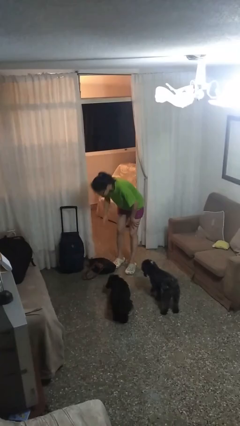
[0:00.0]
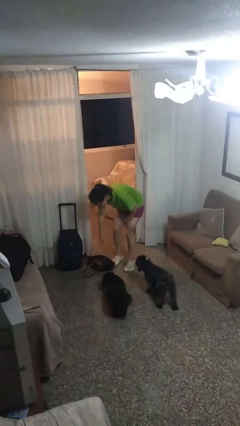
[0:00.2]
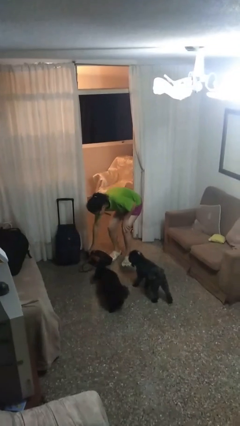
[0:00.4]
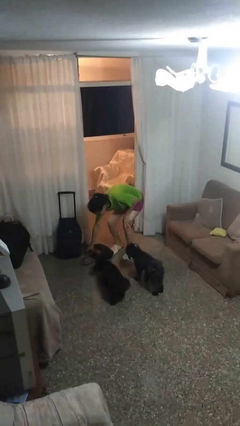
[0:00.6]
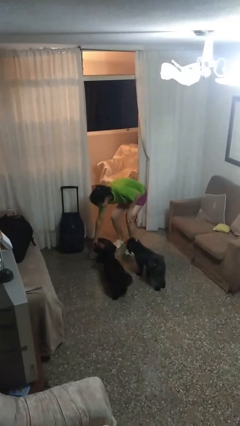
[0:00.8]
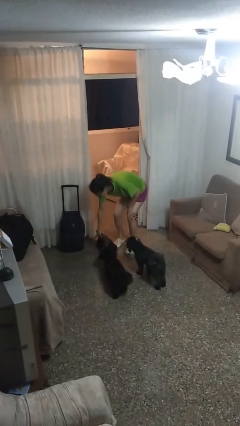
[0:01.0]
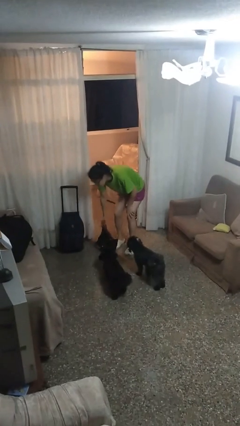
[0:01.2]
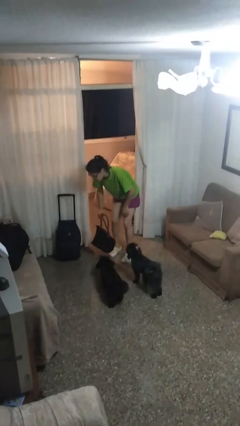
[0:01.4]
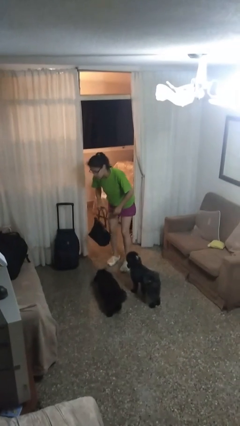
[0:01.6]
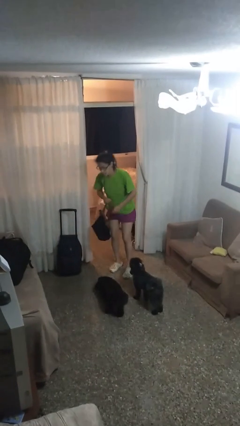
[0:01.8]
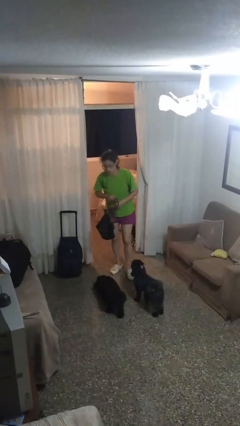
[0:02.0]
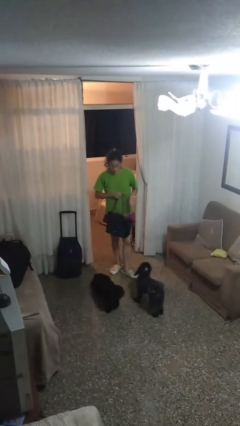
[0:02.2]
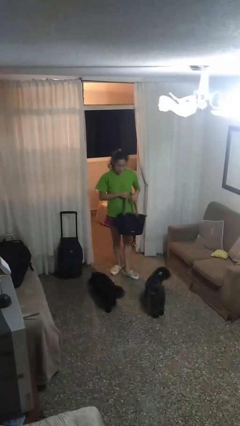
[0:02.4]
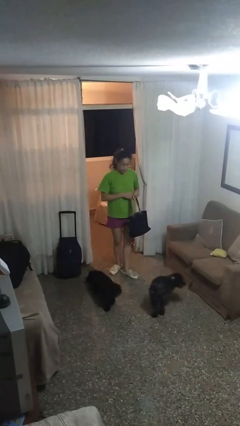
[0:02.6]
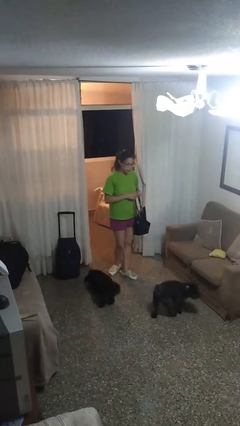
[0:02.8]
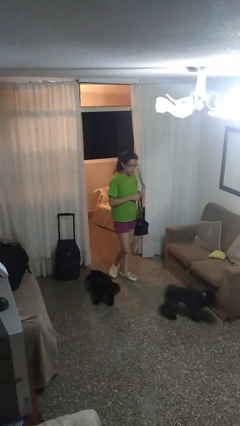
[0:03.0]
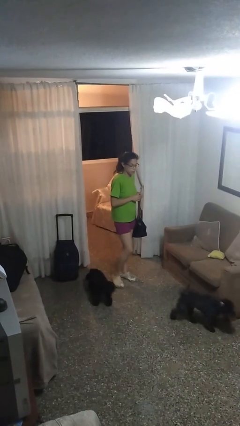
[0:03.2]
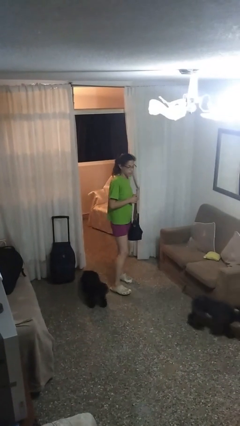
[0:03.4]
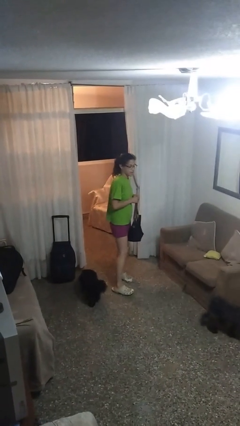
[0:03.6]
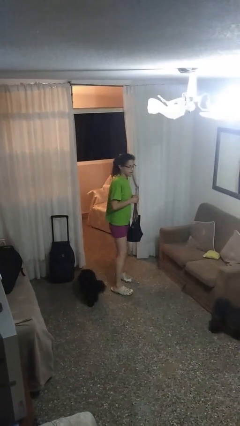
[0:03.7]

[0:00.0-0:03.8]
person picks up object from floor

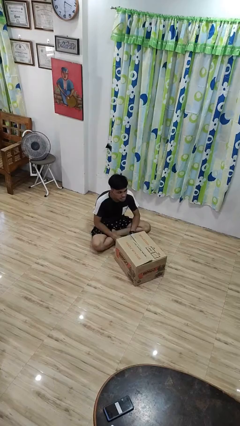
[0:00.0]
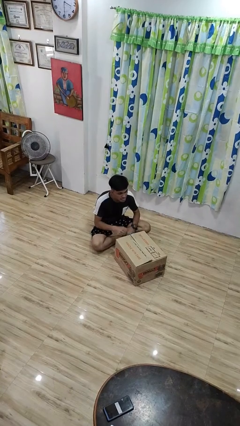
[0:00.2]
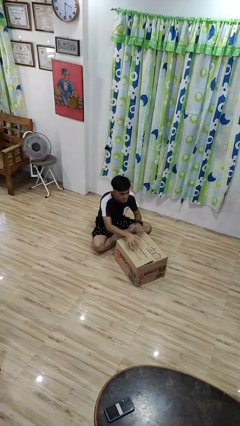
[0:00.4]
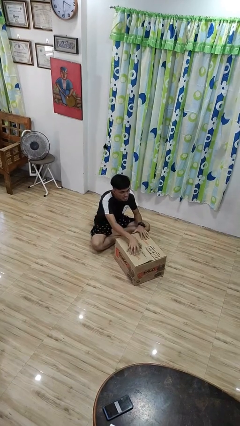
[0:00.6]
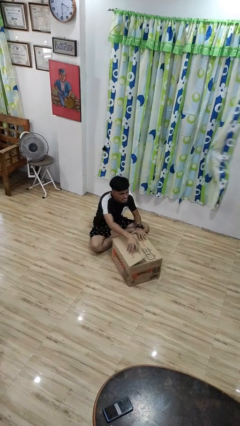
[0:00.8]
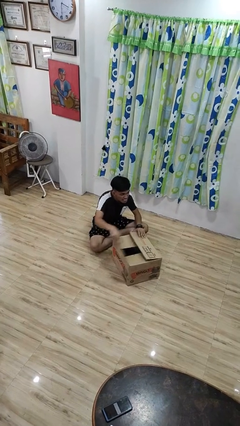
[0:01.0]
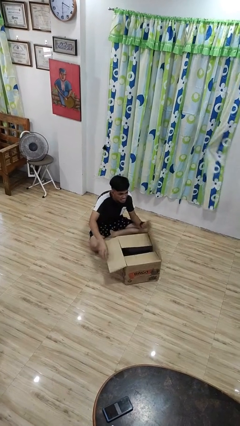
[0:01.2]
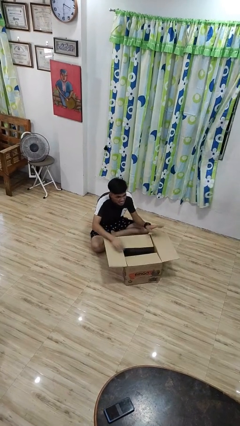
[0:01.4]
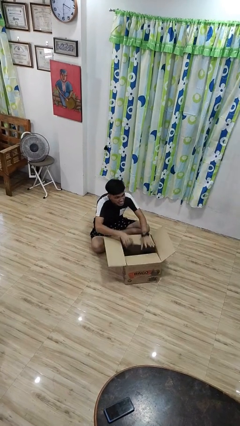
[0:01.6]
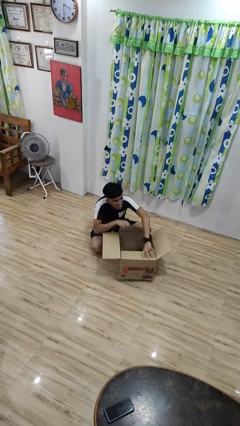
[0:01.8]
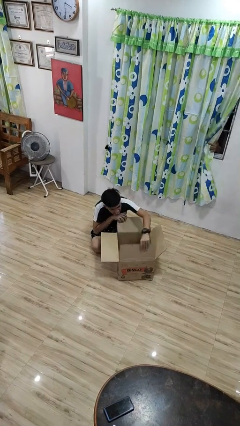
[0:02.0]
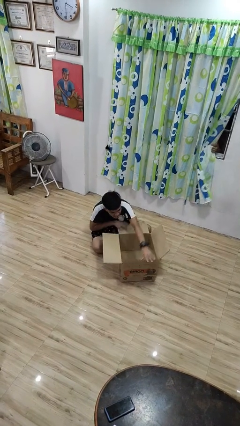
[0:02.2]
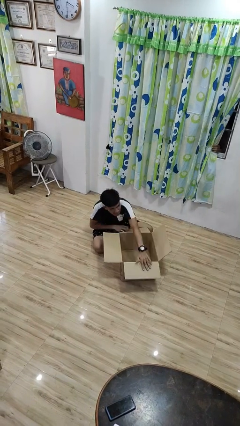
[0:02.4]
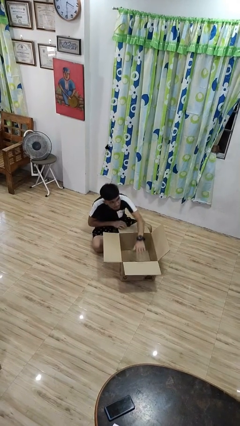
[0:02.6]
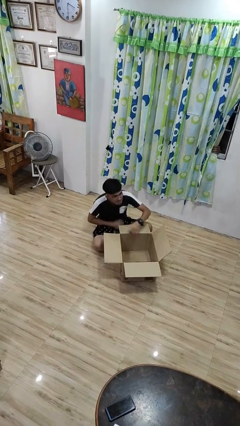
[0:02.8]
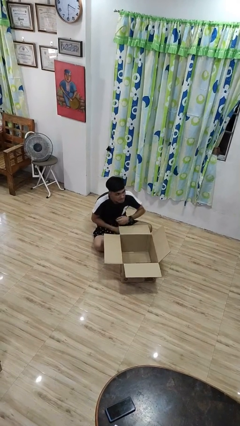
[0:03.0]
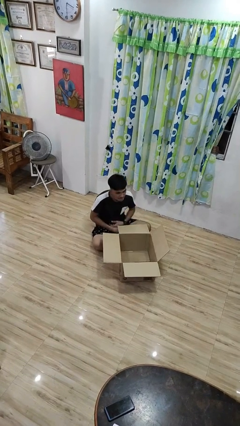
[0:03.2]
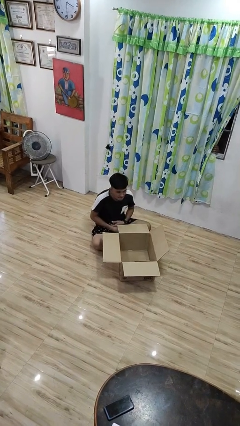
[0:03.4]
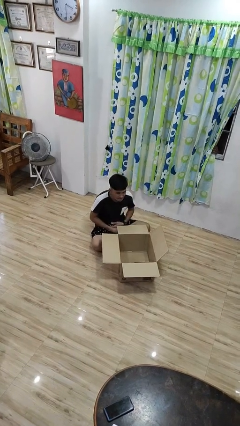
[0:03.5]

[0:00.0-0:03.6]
person opens box

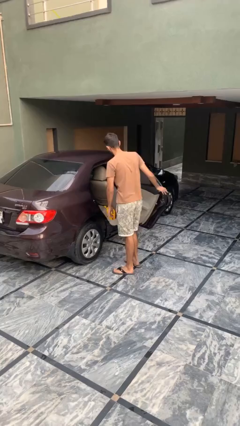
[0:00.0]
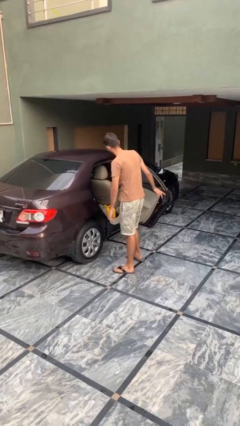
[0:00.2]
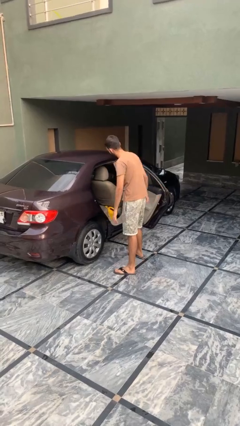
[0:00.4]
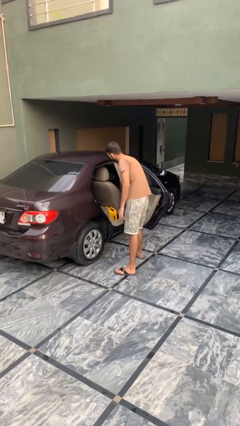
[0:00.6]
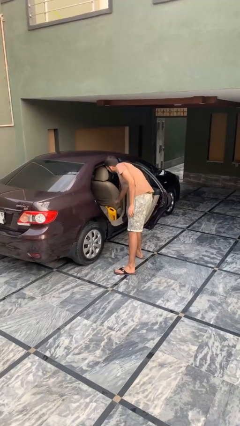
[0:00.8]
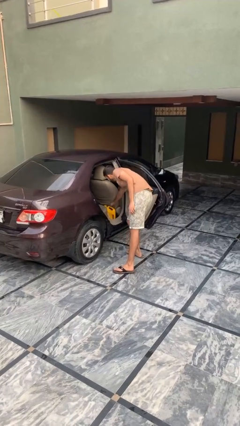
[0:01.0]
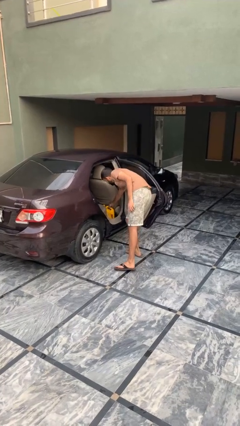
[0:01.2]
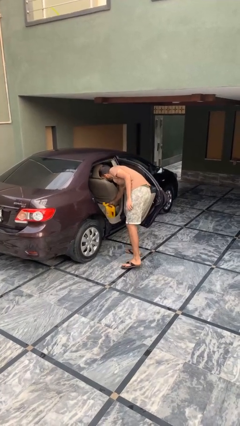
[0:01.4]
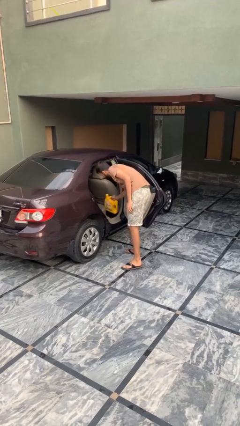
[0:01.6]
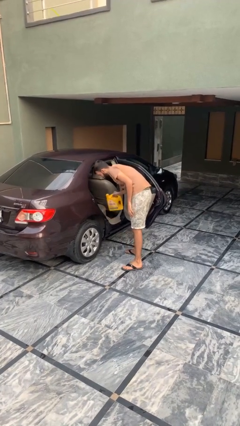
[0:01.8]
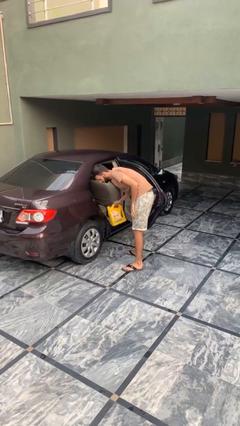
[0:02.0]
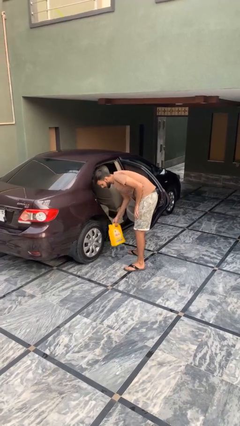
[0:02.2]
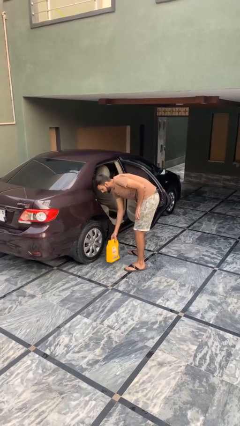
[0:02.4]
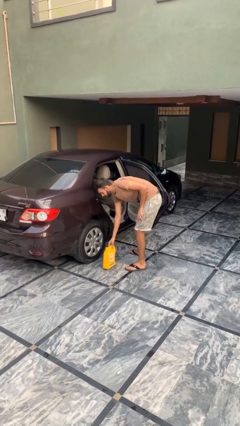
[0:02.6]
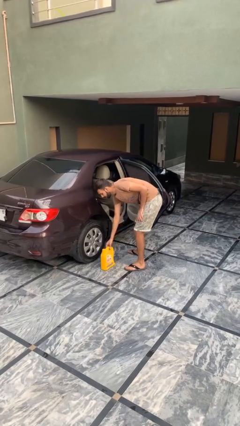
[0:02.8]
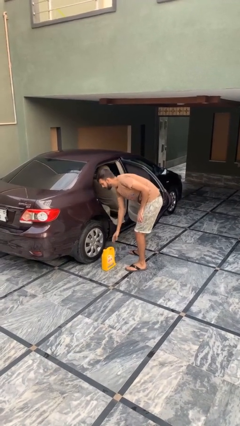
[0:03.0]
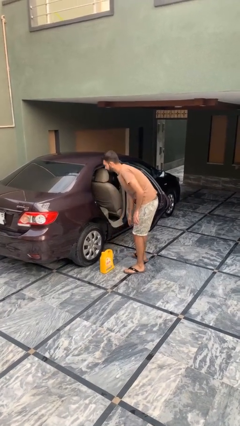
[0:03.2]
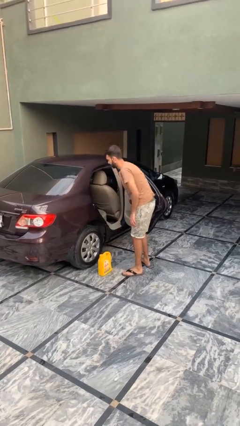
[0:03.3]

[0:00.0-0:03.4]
person unloads car

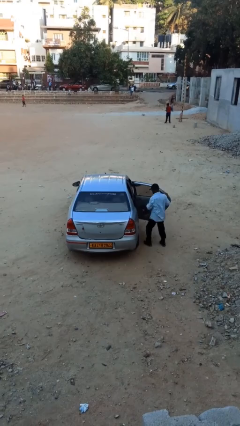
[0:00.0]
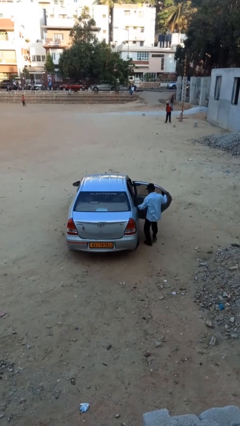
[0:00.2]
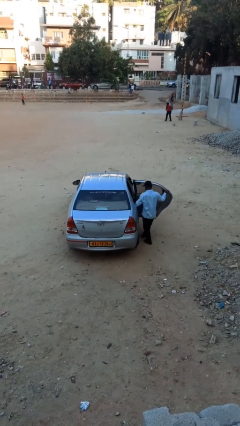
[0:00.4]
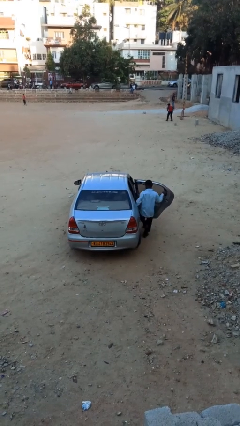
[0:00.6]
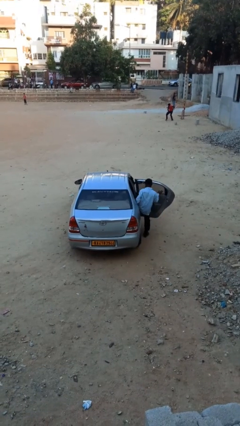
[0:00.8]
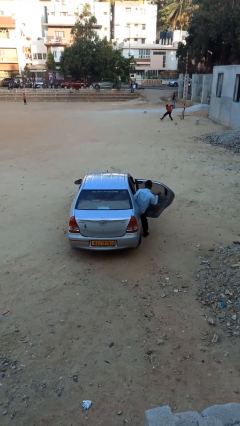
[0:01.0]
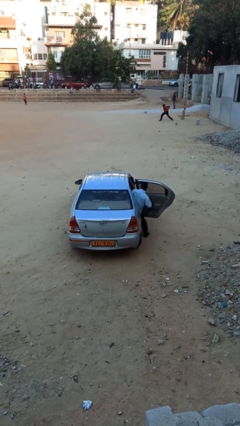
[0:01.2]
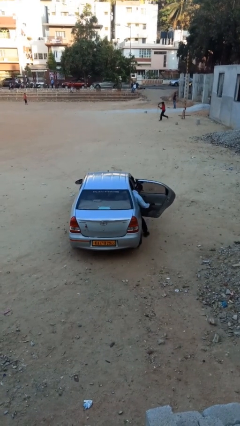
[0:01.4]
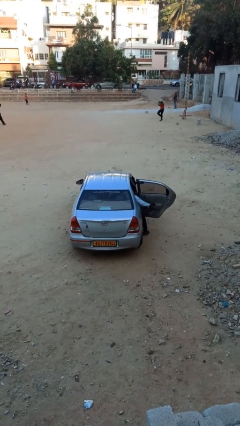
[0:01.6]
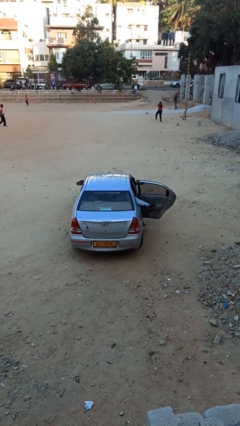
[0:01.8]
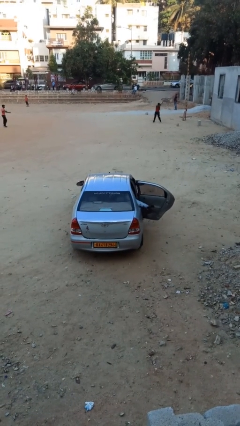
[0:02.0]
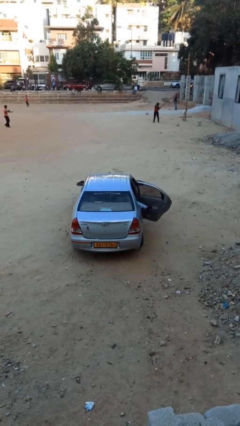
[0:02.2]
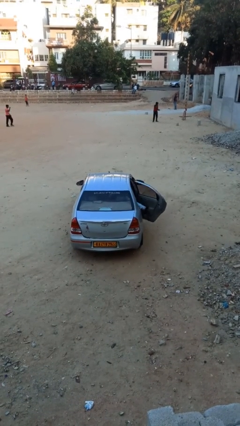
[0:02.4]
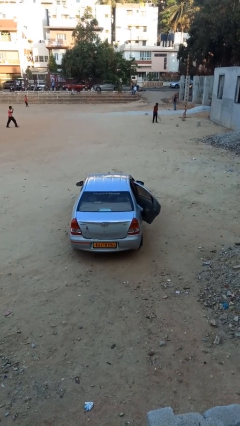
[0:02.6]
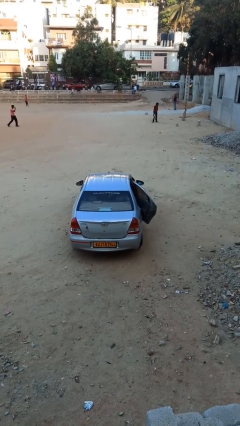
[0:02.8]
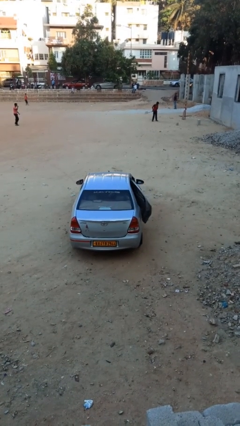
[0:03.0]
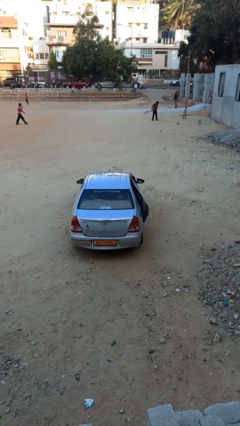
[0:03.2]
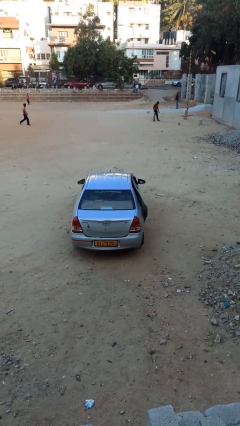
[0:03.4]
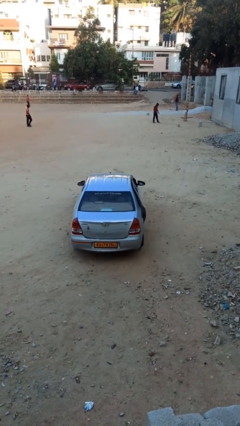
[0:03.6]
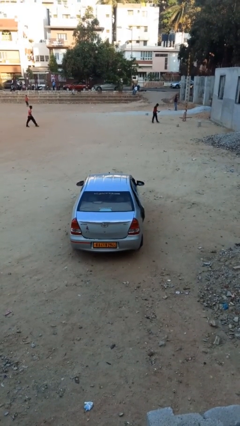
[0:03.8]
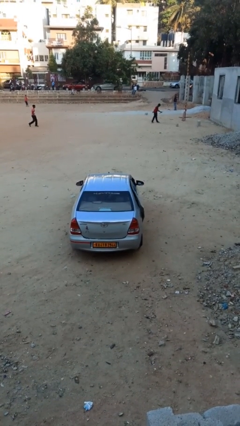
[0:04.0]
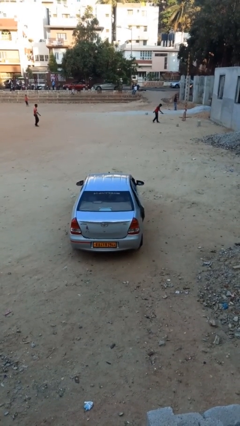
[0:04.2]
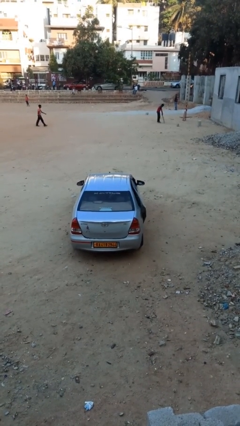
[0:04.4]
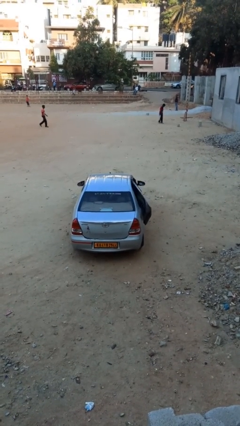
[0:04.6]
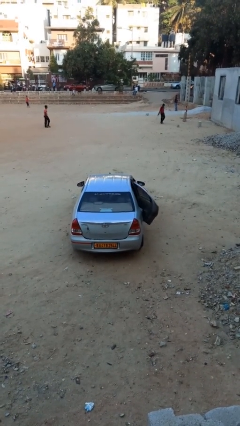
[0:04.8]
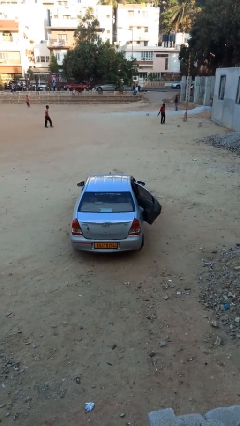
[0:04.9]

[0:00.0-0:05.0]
car picks up person

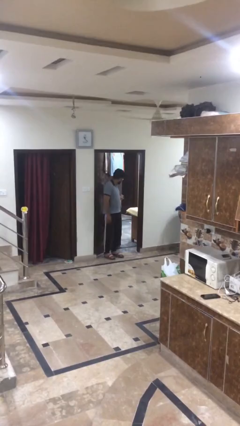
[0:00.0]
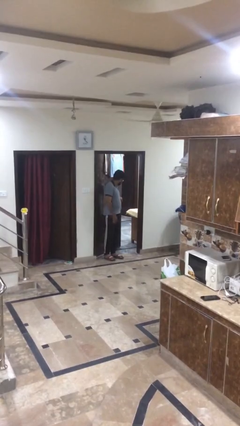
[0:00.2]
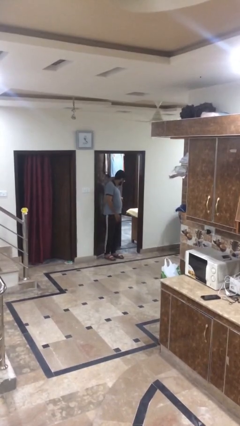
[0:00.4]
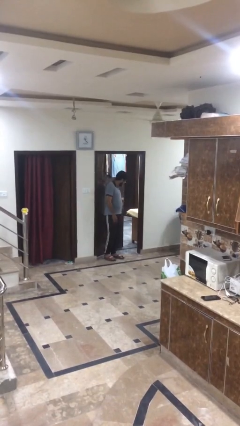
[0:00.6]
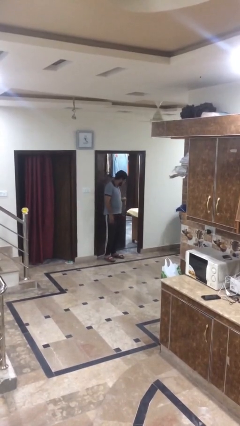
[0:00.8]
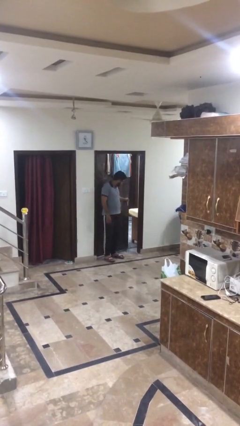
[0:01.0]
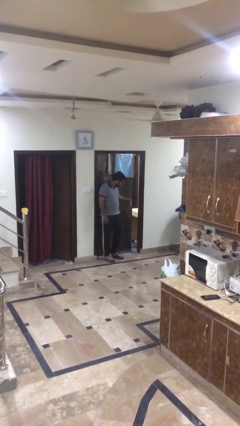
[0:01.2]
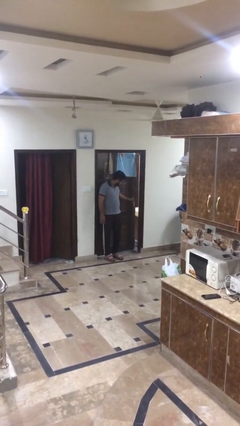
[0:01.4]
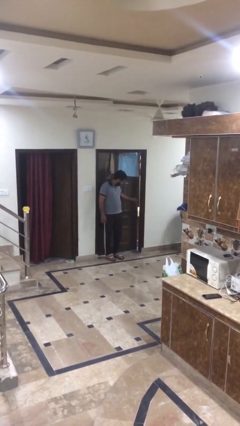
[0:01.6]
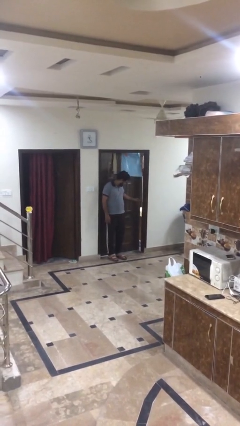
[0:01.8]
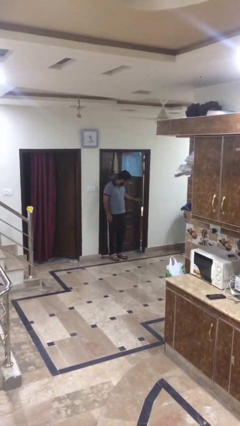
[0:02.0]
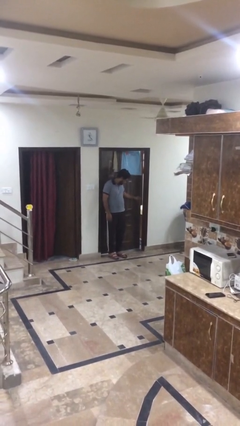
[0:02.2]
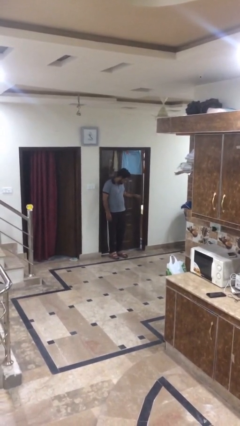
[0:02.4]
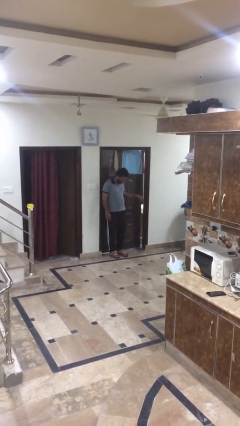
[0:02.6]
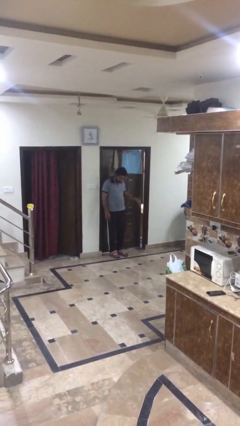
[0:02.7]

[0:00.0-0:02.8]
person closes facility door
